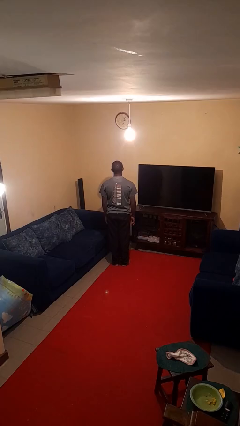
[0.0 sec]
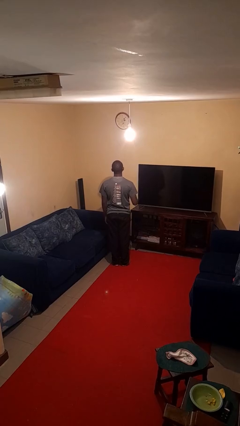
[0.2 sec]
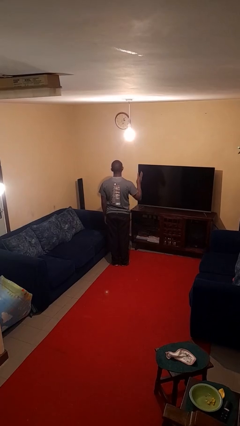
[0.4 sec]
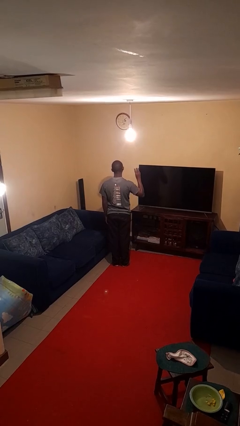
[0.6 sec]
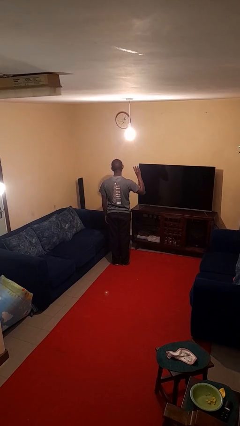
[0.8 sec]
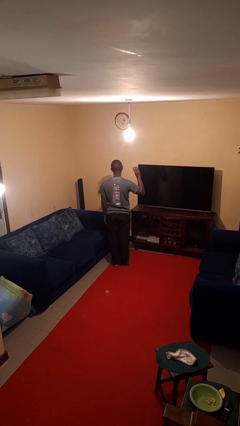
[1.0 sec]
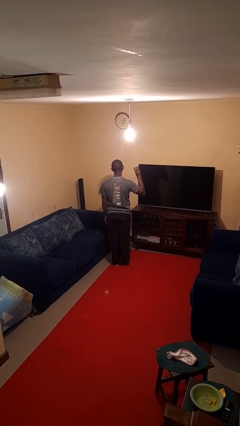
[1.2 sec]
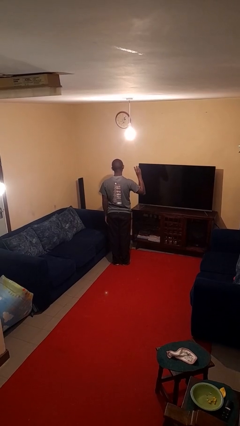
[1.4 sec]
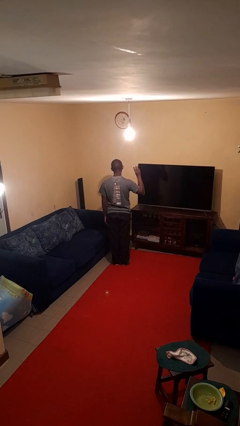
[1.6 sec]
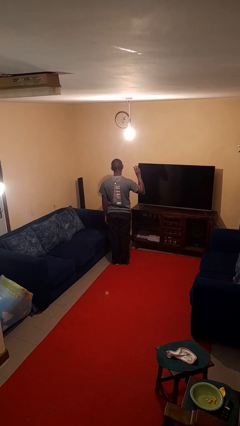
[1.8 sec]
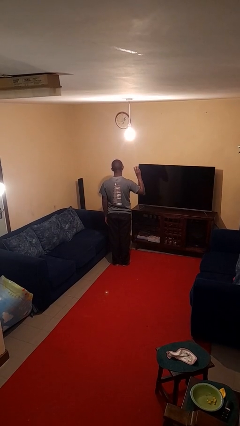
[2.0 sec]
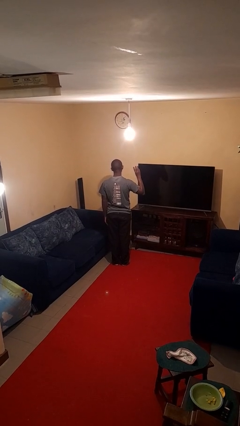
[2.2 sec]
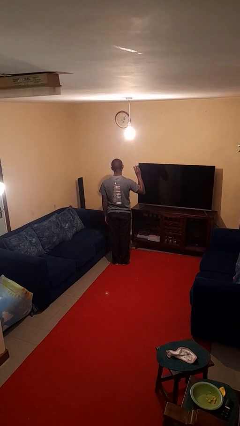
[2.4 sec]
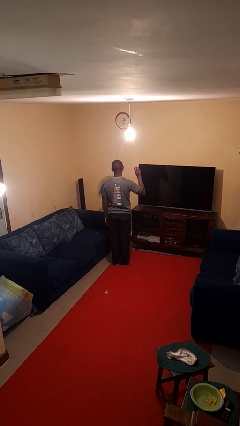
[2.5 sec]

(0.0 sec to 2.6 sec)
person gestures number three

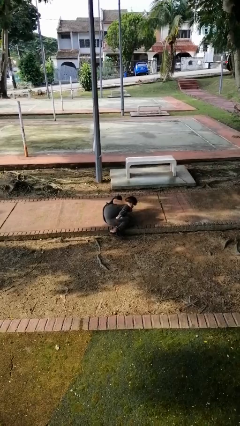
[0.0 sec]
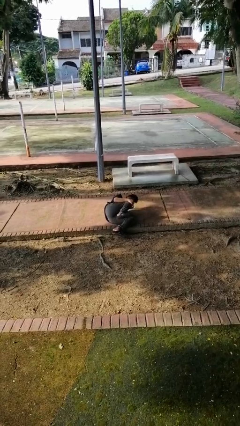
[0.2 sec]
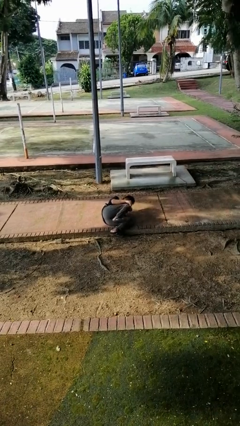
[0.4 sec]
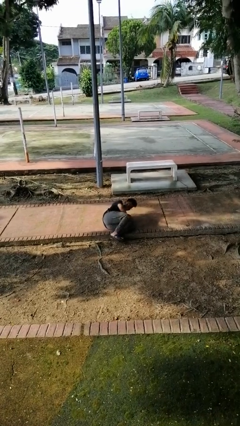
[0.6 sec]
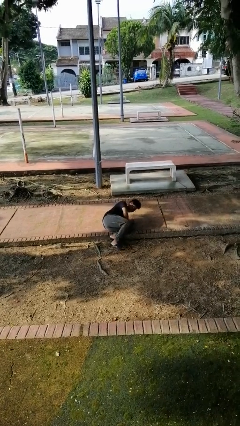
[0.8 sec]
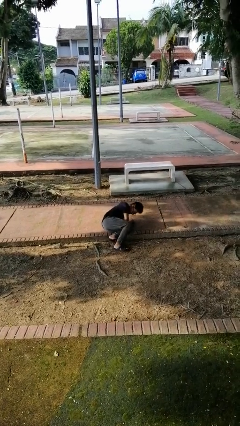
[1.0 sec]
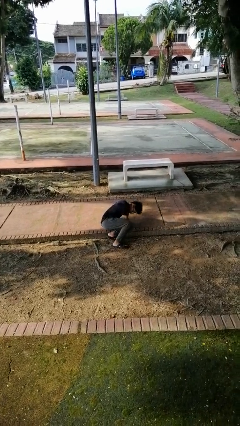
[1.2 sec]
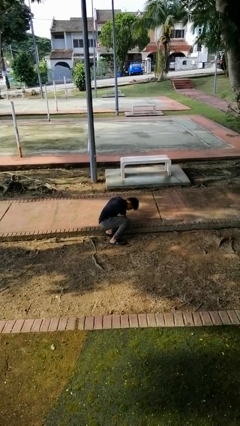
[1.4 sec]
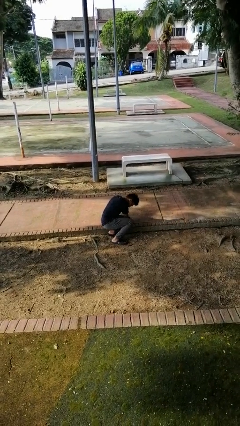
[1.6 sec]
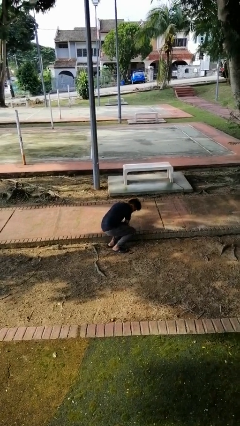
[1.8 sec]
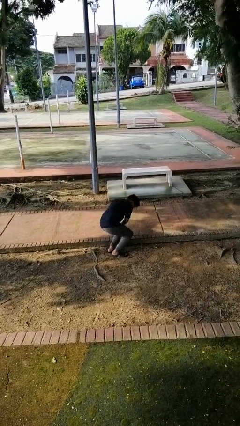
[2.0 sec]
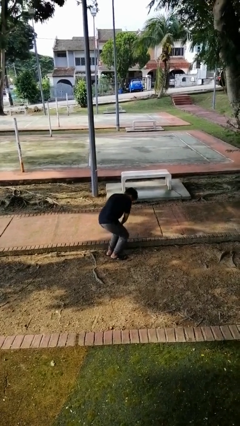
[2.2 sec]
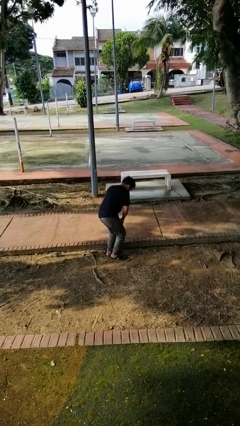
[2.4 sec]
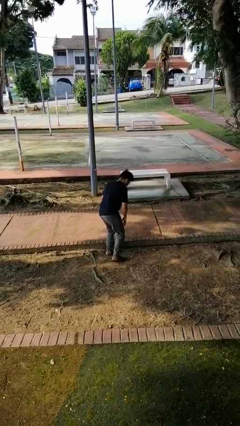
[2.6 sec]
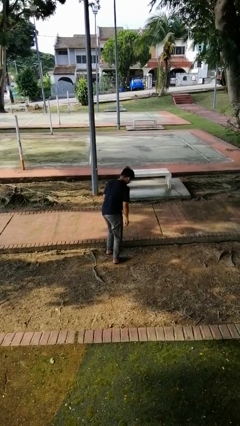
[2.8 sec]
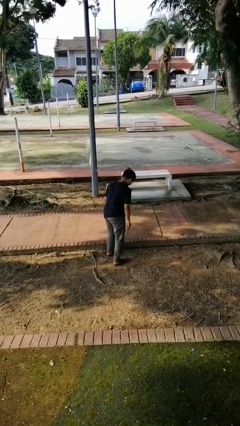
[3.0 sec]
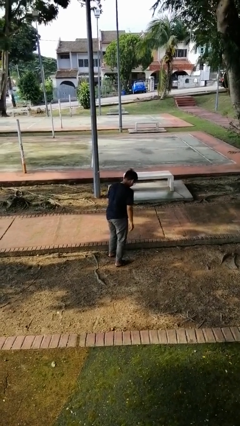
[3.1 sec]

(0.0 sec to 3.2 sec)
person stands up from floor

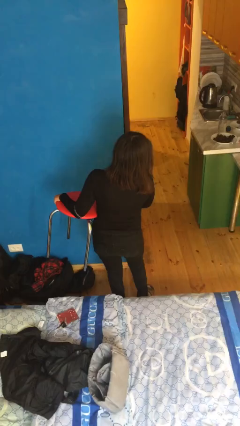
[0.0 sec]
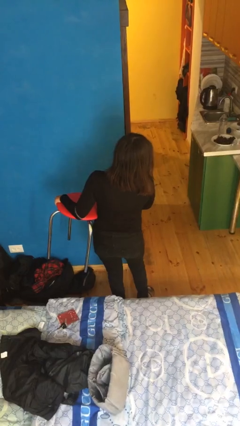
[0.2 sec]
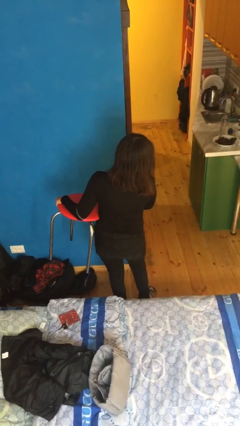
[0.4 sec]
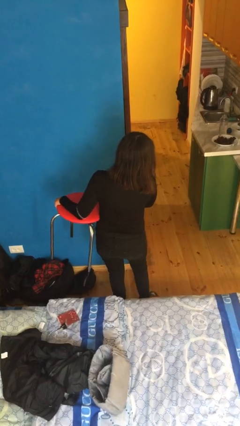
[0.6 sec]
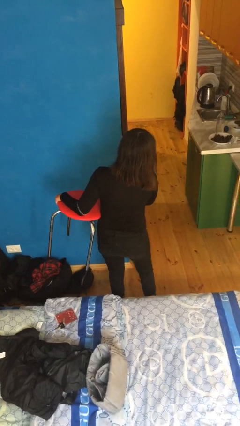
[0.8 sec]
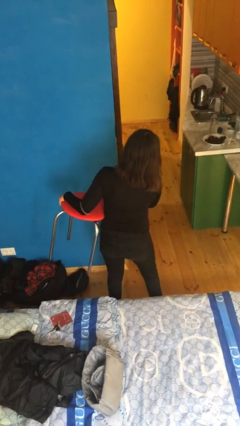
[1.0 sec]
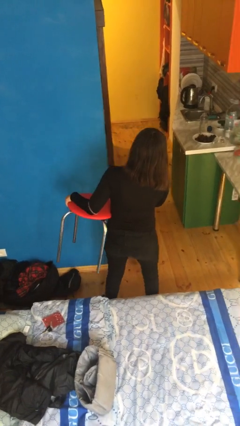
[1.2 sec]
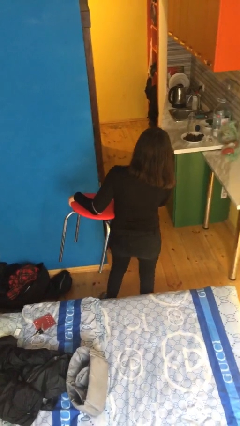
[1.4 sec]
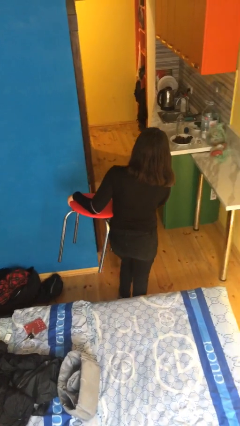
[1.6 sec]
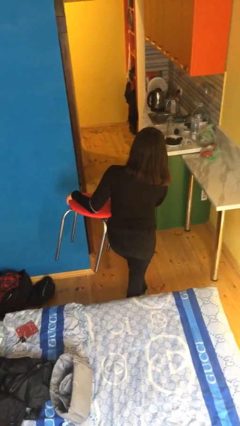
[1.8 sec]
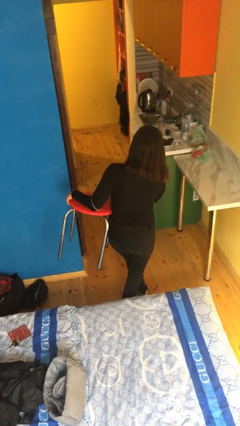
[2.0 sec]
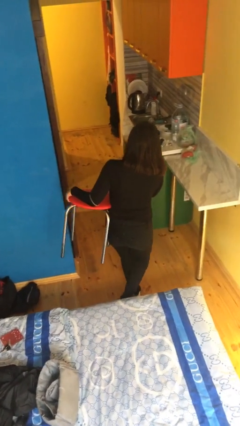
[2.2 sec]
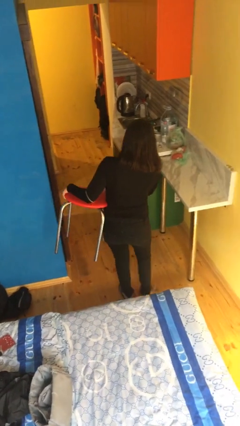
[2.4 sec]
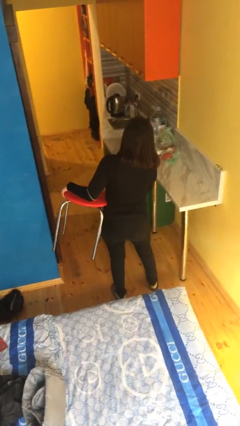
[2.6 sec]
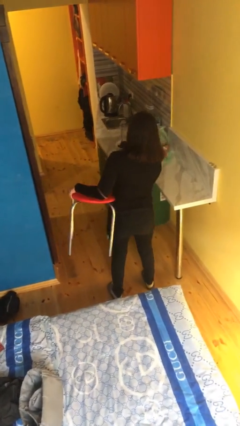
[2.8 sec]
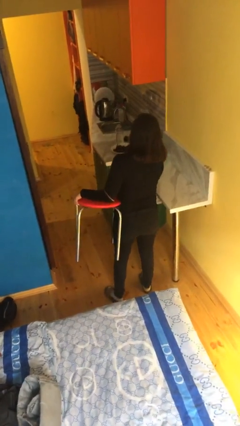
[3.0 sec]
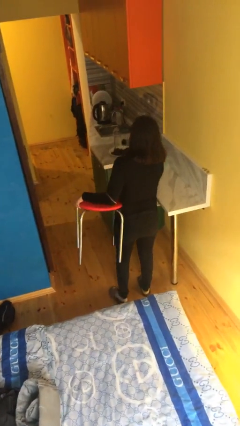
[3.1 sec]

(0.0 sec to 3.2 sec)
person carries furniture

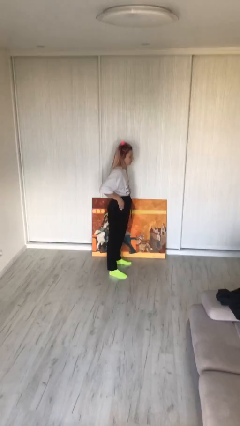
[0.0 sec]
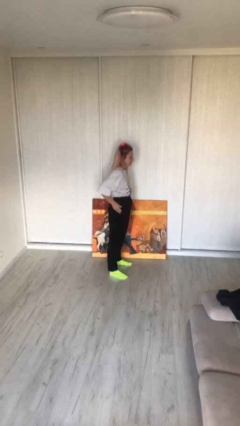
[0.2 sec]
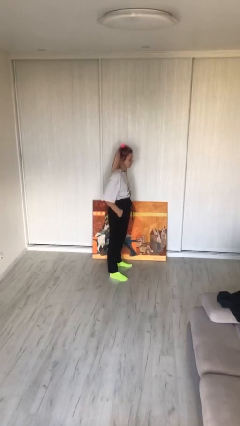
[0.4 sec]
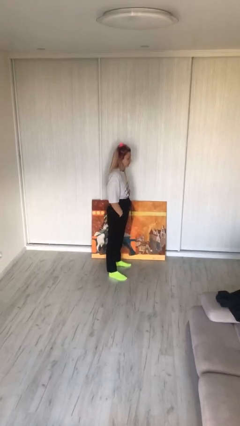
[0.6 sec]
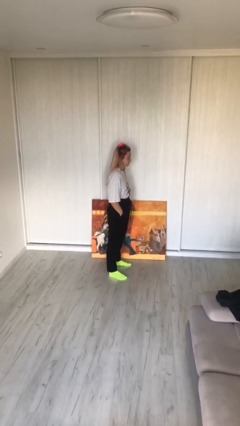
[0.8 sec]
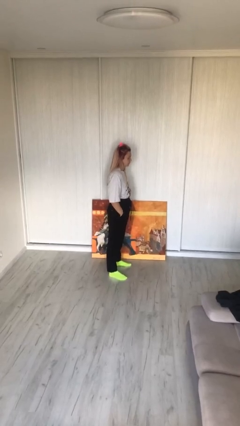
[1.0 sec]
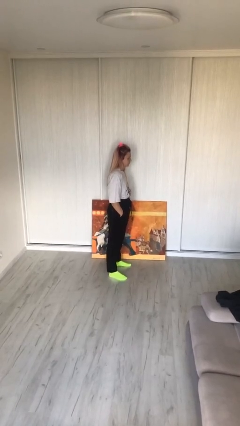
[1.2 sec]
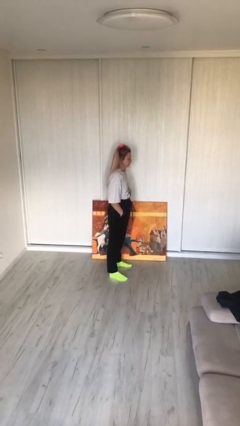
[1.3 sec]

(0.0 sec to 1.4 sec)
person puts hands in back pockets

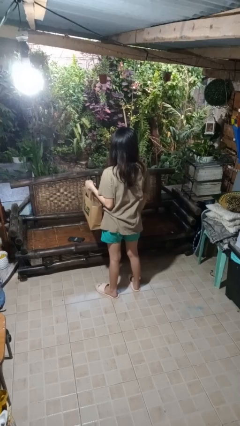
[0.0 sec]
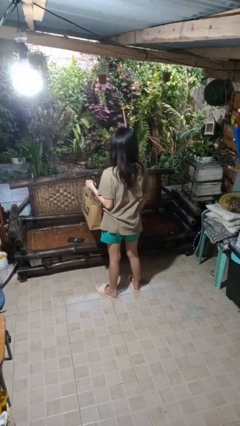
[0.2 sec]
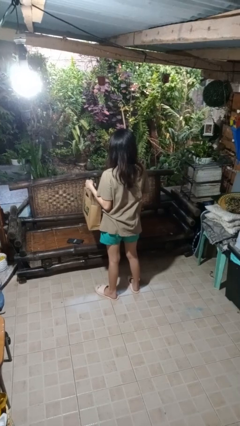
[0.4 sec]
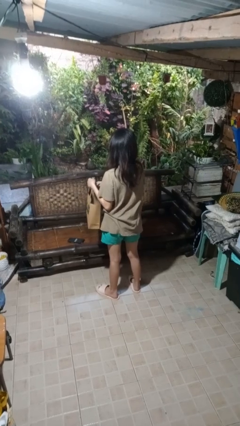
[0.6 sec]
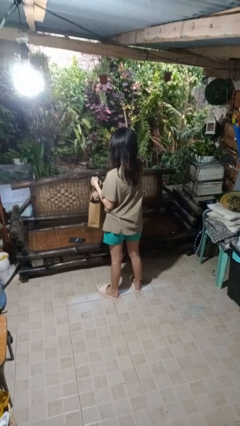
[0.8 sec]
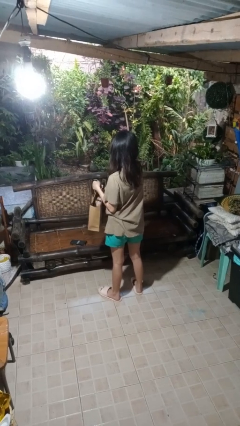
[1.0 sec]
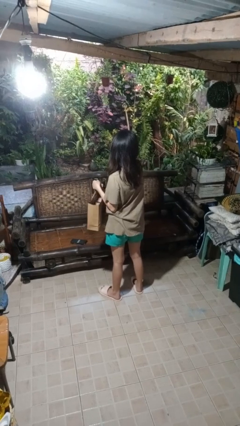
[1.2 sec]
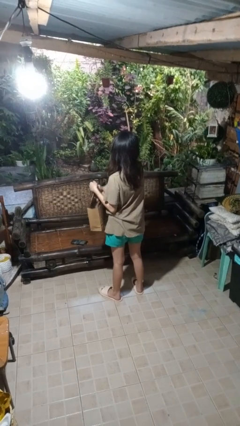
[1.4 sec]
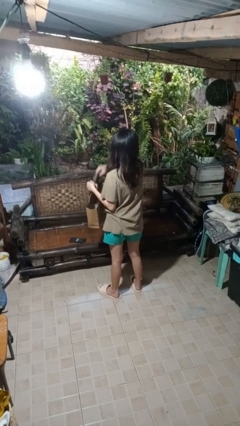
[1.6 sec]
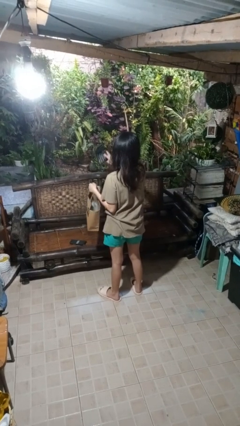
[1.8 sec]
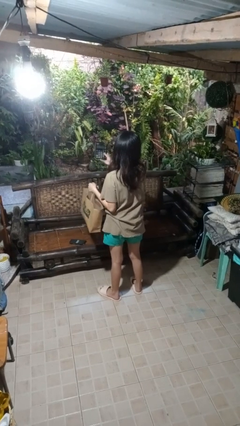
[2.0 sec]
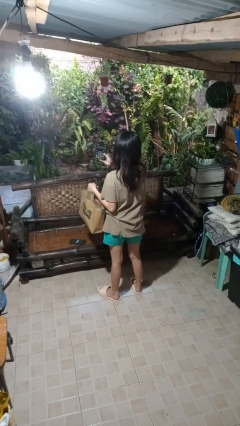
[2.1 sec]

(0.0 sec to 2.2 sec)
person takes object from bag

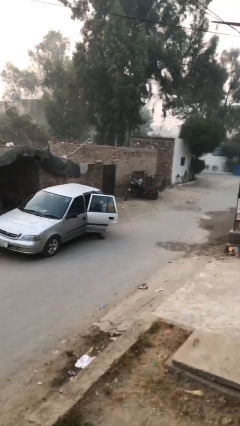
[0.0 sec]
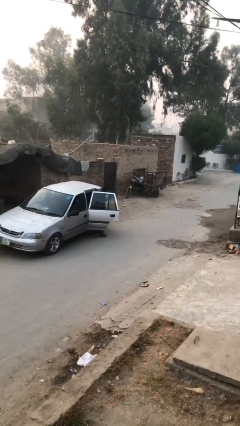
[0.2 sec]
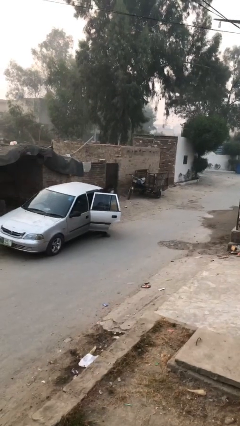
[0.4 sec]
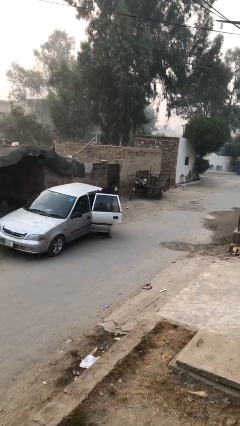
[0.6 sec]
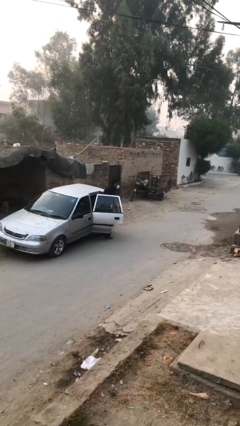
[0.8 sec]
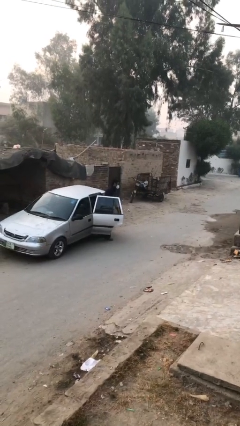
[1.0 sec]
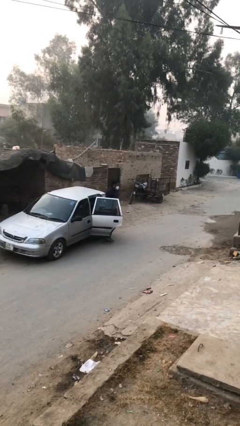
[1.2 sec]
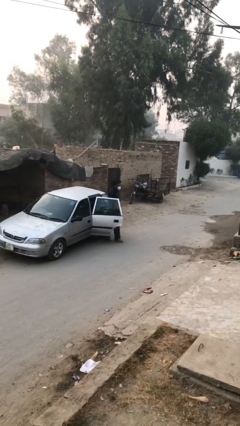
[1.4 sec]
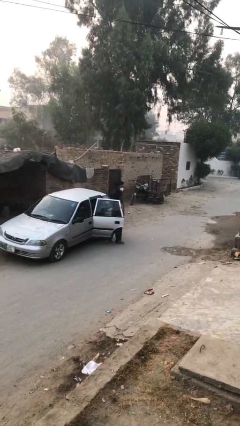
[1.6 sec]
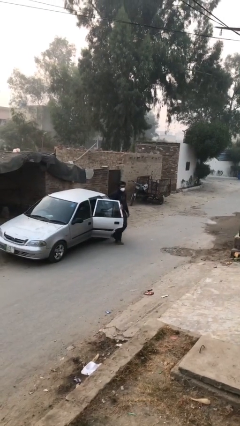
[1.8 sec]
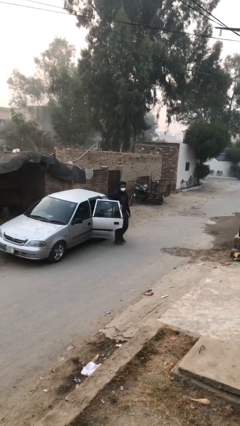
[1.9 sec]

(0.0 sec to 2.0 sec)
person exits car

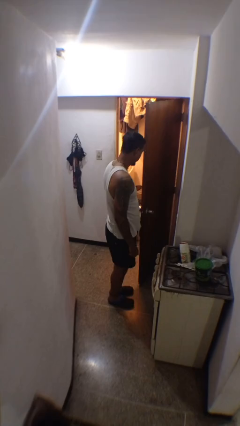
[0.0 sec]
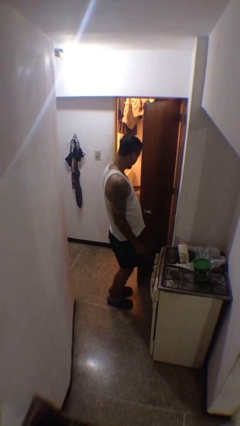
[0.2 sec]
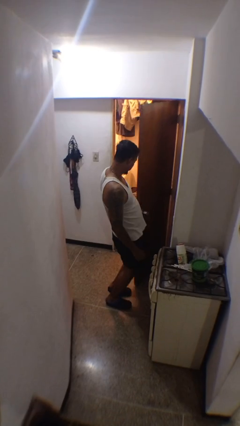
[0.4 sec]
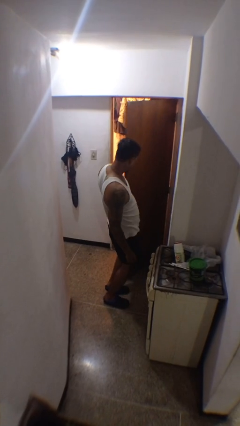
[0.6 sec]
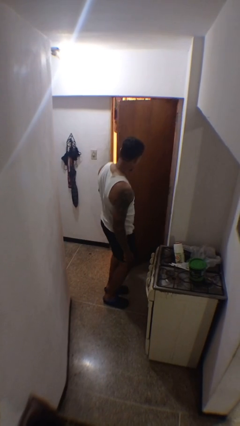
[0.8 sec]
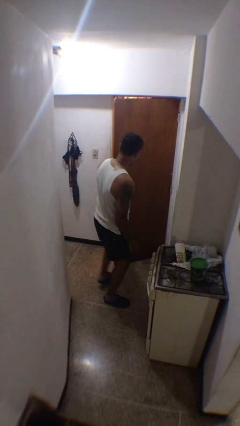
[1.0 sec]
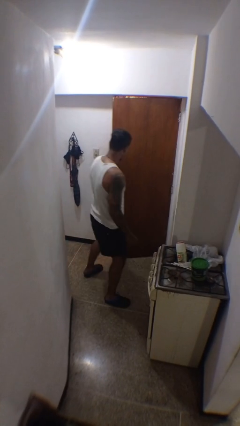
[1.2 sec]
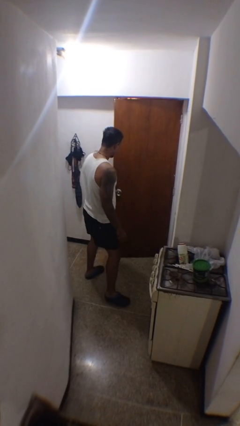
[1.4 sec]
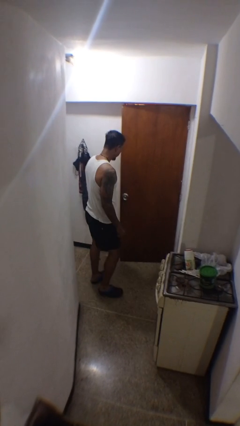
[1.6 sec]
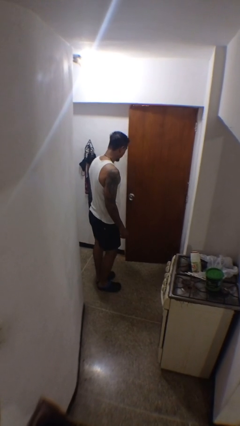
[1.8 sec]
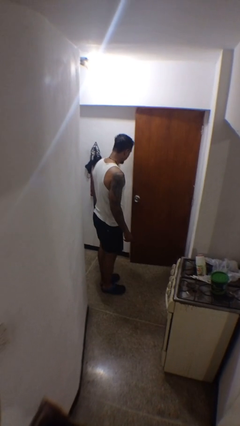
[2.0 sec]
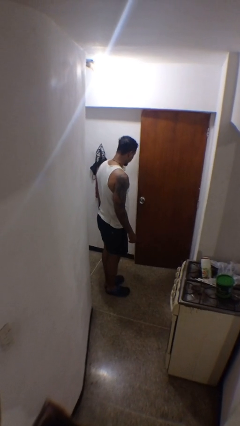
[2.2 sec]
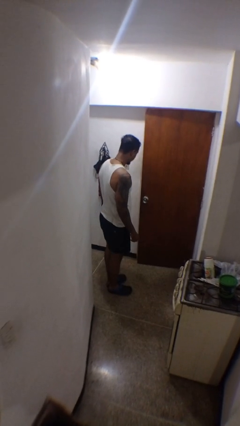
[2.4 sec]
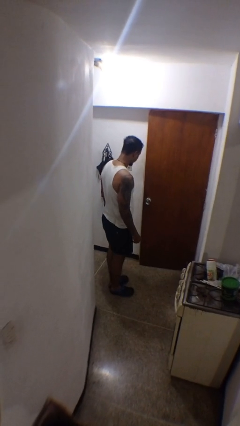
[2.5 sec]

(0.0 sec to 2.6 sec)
person closes door with hip
